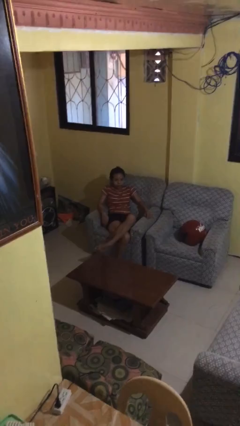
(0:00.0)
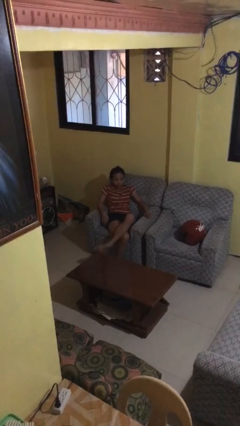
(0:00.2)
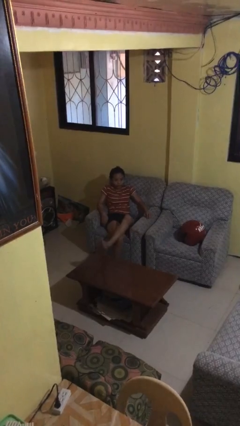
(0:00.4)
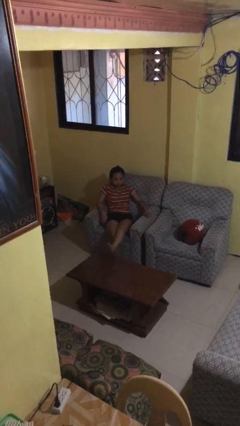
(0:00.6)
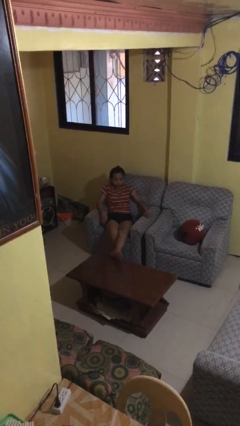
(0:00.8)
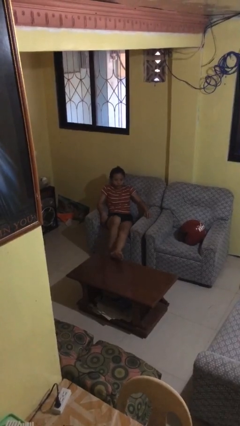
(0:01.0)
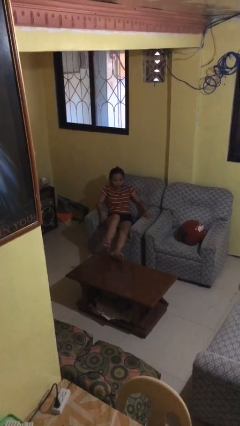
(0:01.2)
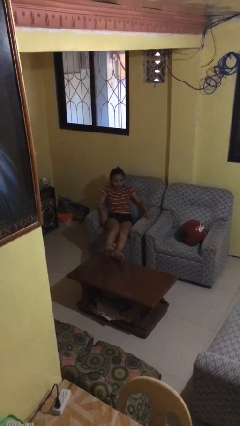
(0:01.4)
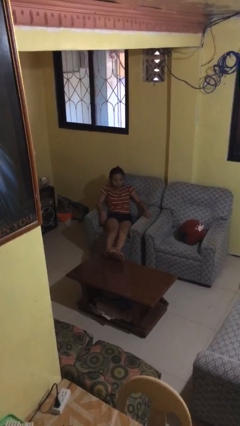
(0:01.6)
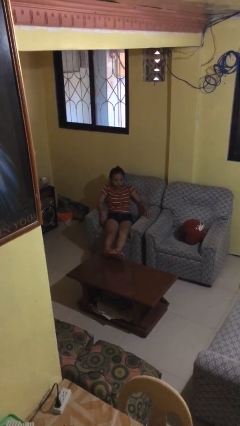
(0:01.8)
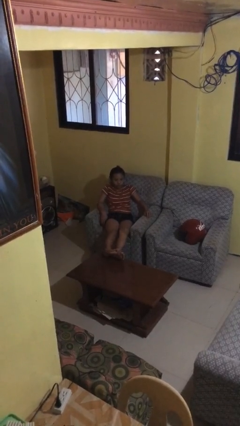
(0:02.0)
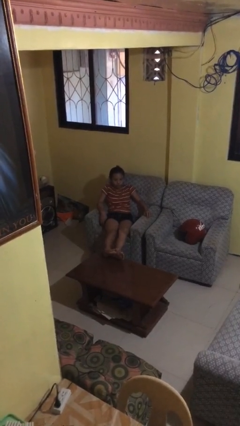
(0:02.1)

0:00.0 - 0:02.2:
person puts feet up

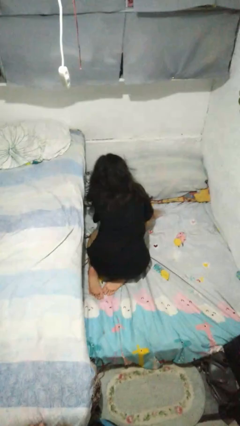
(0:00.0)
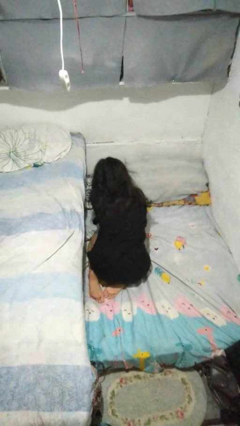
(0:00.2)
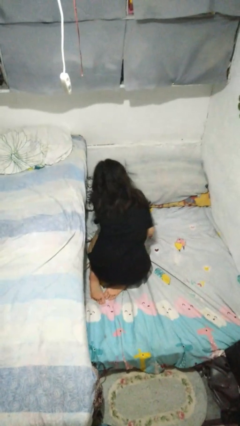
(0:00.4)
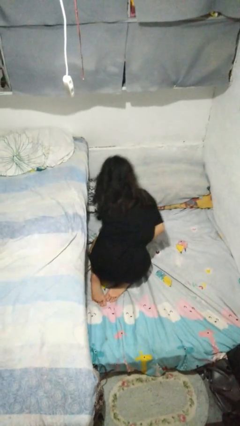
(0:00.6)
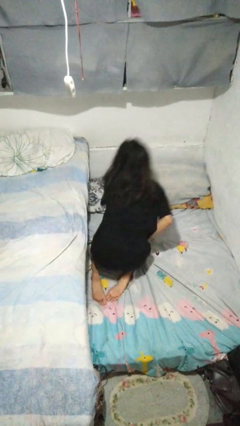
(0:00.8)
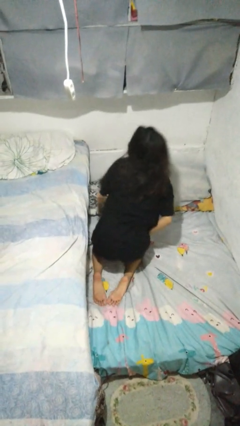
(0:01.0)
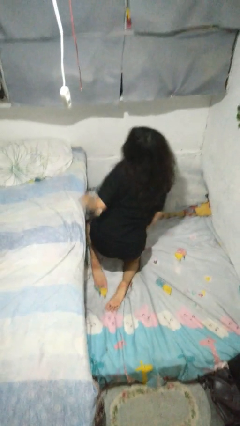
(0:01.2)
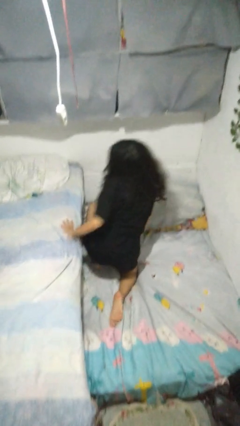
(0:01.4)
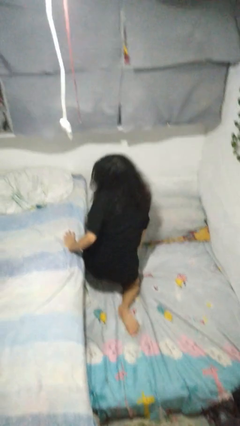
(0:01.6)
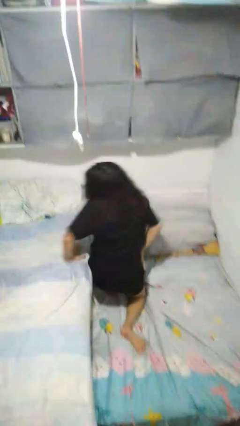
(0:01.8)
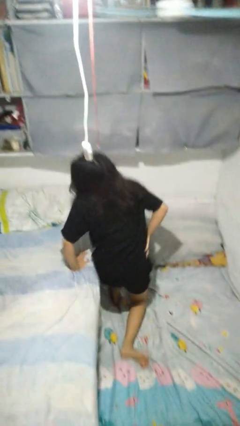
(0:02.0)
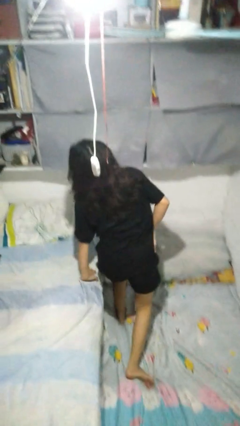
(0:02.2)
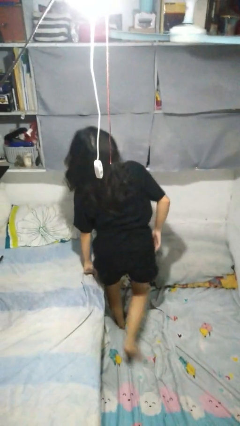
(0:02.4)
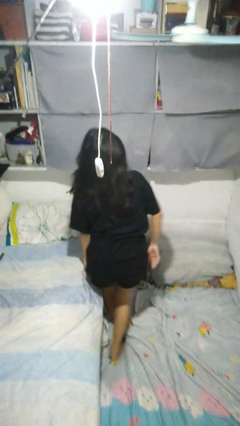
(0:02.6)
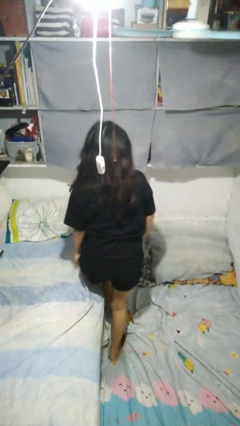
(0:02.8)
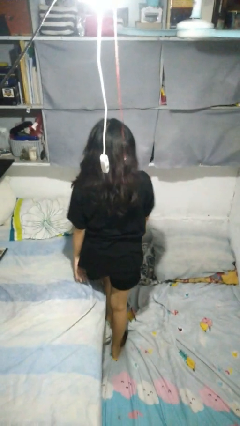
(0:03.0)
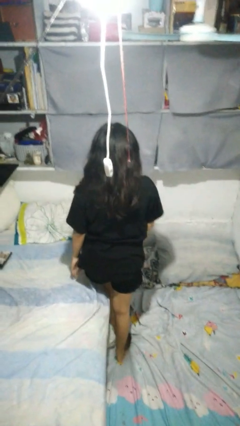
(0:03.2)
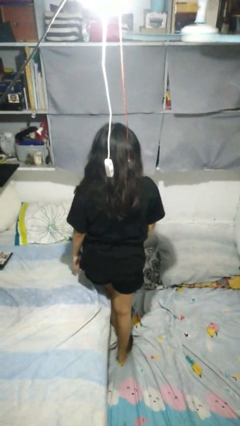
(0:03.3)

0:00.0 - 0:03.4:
person stands up from floor

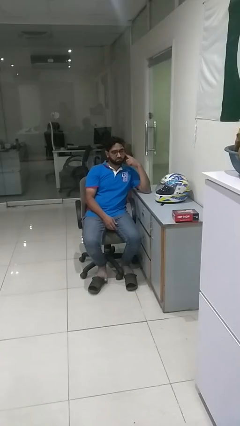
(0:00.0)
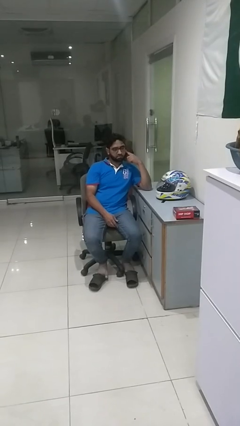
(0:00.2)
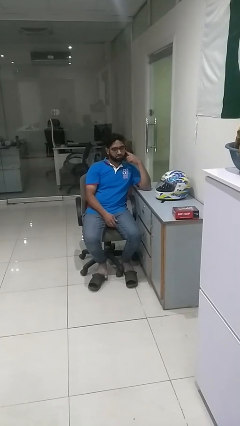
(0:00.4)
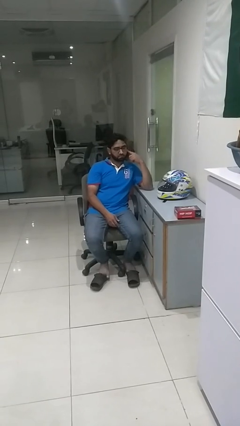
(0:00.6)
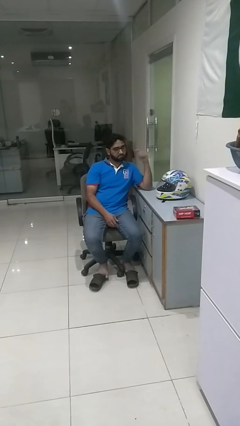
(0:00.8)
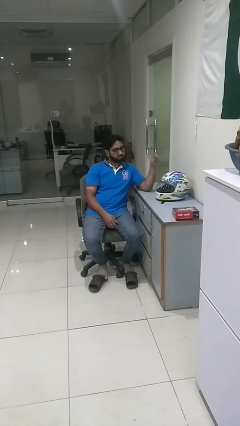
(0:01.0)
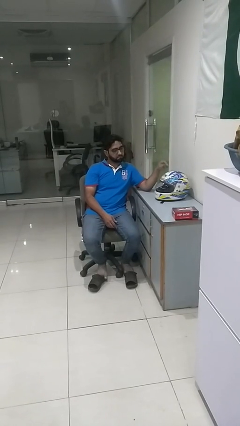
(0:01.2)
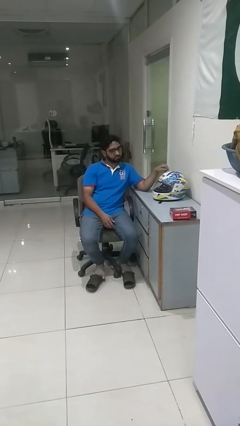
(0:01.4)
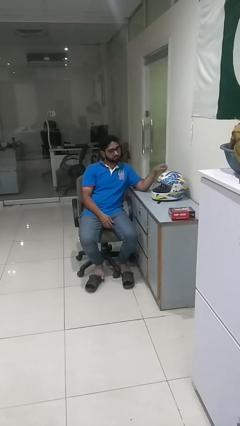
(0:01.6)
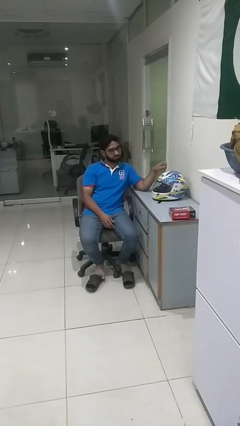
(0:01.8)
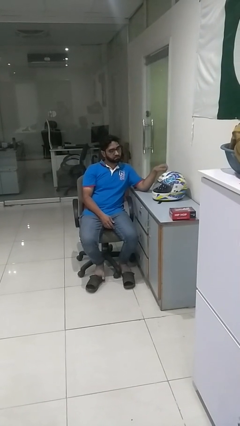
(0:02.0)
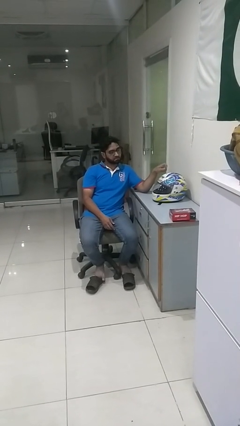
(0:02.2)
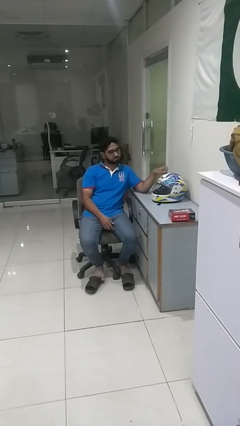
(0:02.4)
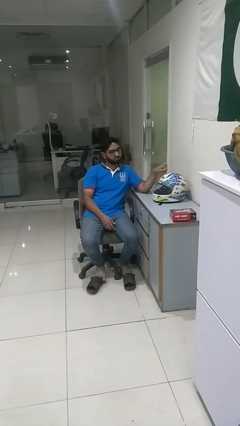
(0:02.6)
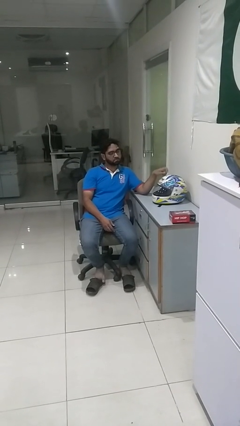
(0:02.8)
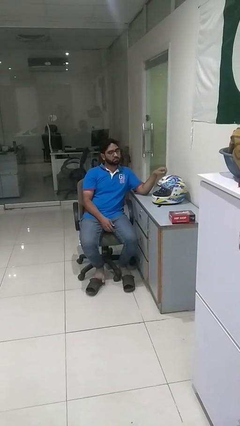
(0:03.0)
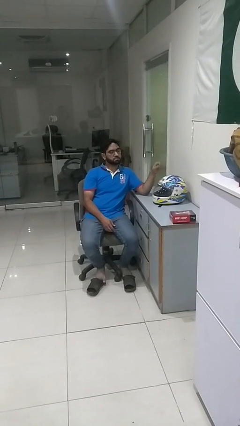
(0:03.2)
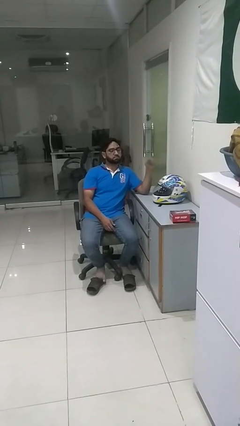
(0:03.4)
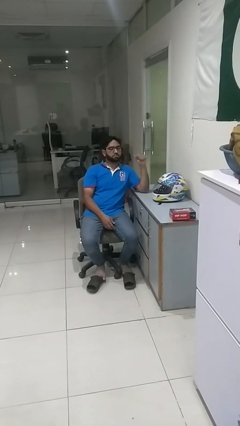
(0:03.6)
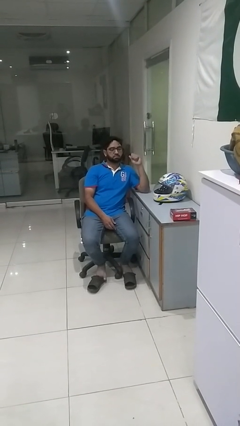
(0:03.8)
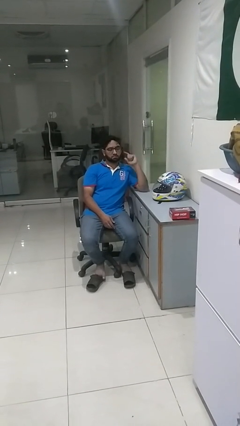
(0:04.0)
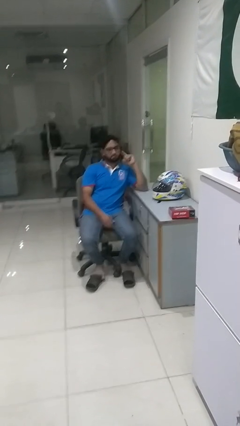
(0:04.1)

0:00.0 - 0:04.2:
person taps object with finger

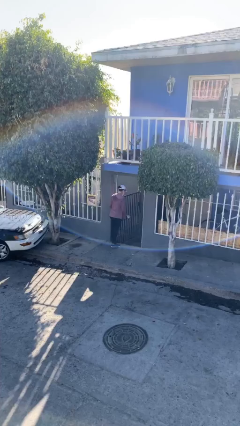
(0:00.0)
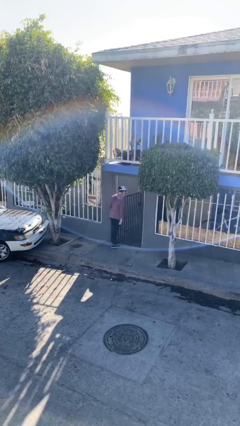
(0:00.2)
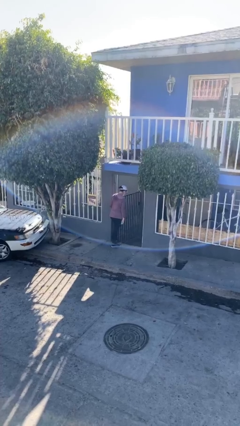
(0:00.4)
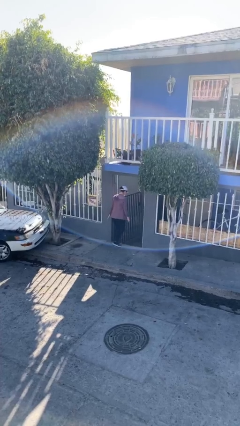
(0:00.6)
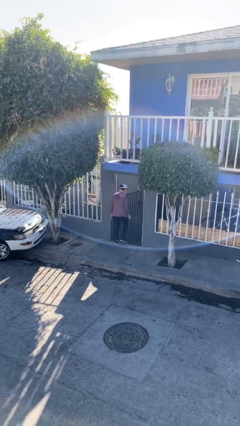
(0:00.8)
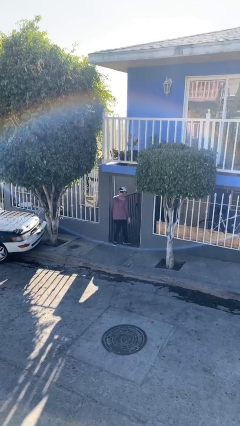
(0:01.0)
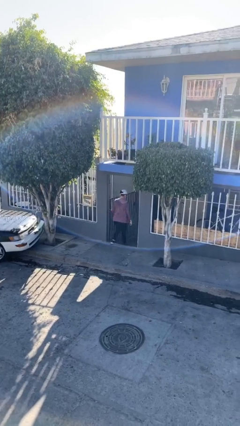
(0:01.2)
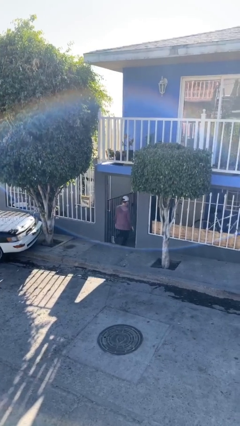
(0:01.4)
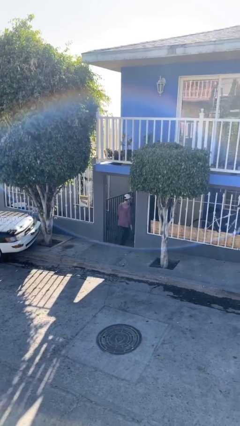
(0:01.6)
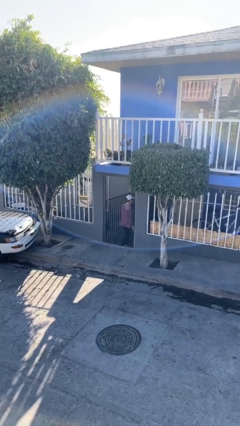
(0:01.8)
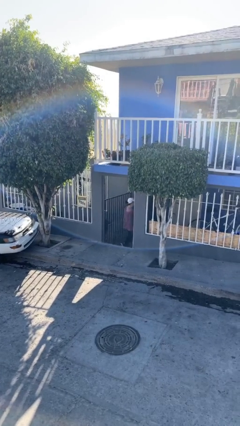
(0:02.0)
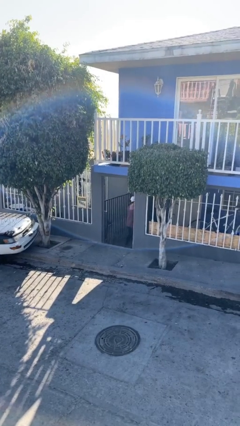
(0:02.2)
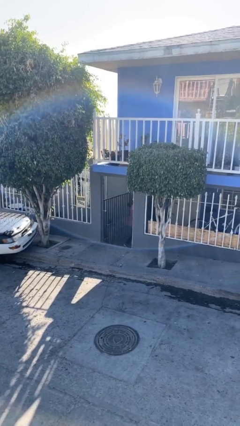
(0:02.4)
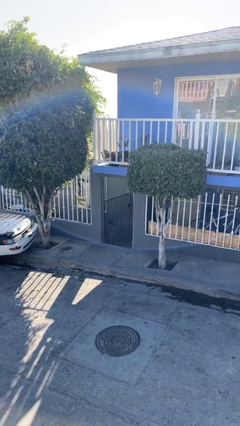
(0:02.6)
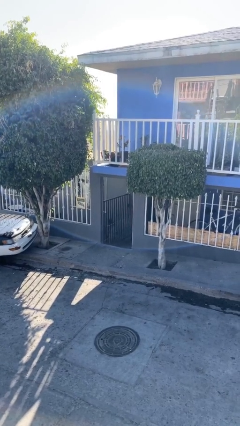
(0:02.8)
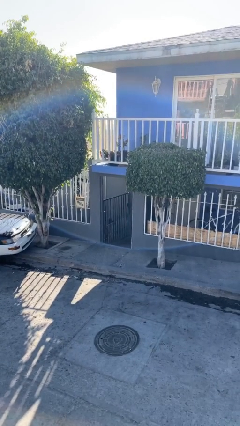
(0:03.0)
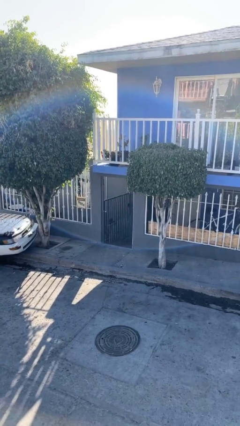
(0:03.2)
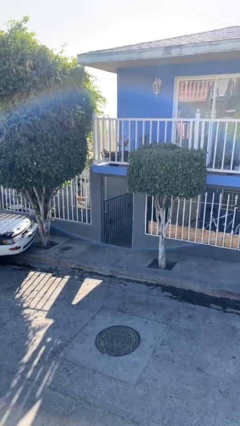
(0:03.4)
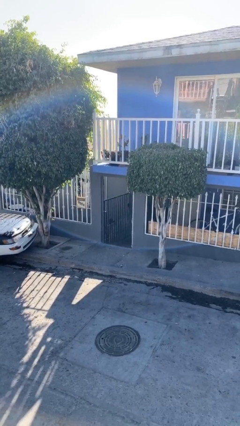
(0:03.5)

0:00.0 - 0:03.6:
person exits scene through structure

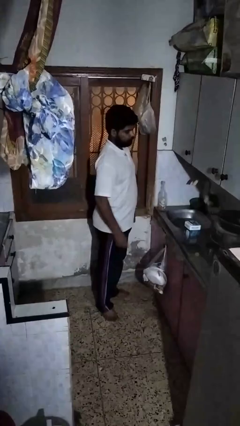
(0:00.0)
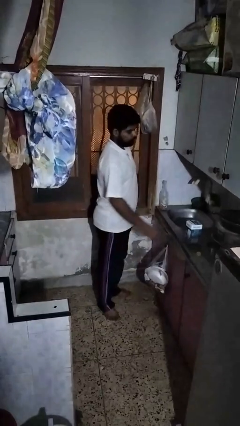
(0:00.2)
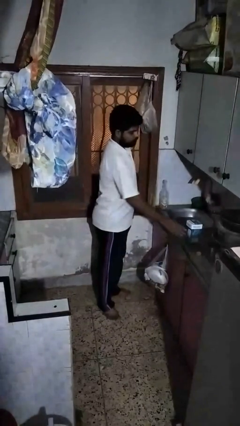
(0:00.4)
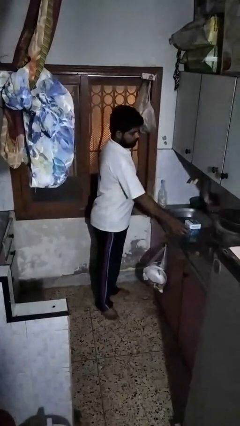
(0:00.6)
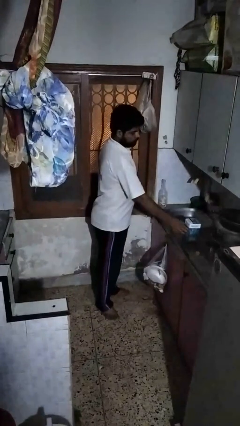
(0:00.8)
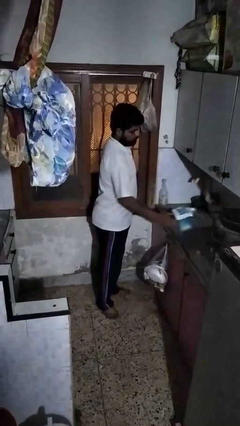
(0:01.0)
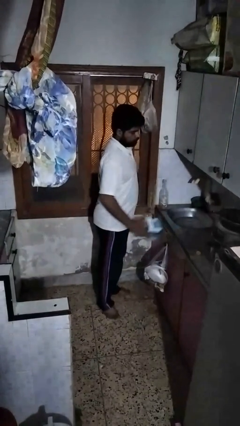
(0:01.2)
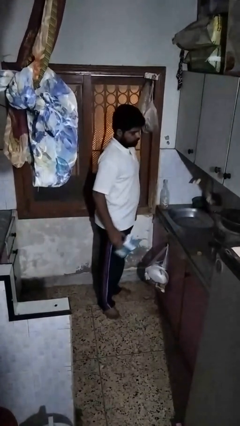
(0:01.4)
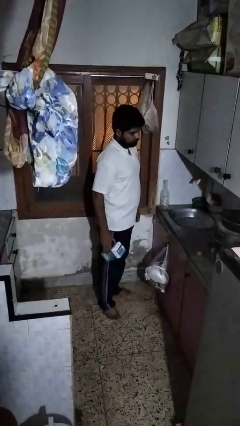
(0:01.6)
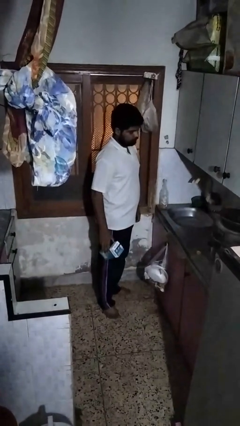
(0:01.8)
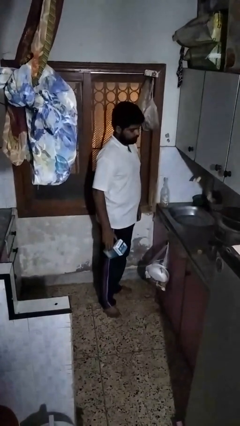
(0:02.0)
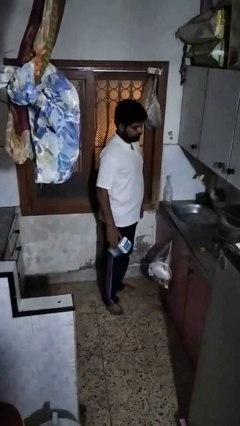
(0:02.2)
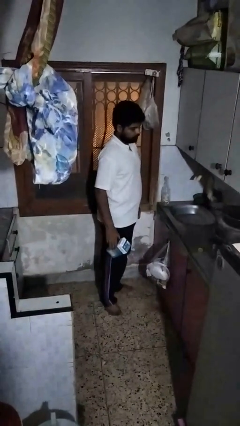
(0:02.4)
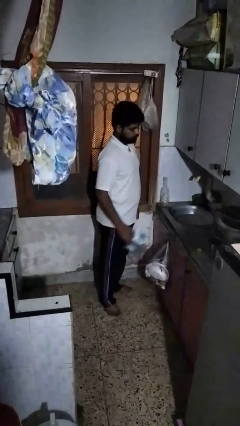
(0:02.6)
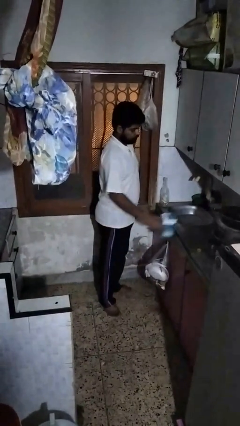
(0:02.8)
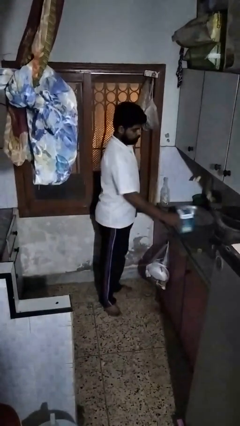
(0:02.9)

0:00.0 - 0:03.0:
person picks up object from countertop

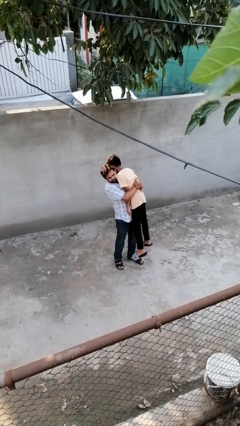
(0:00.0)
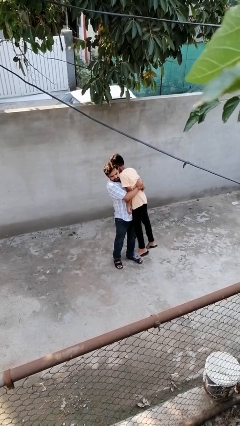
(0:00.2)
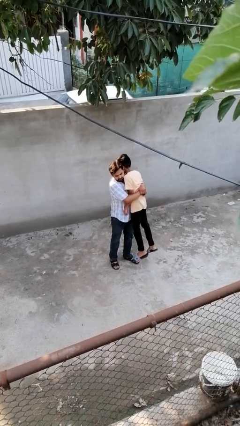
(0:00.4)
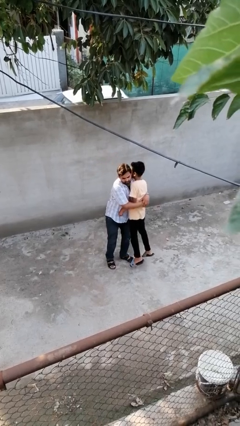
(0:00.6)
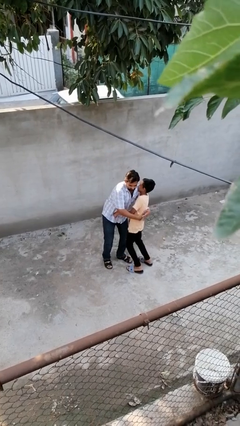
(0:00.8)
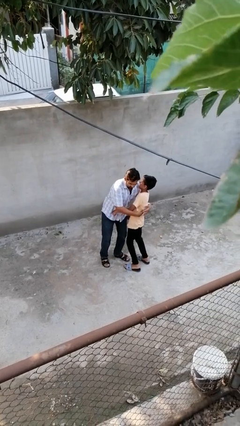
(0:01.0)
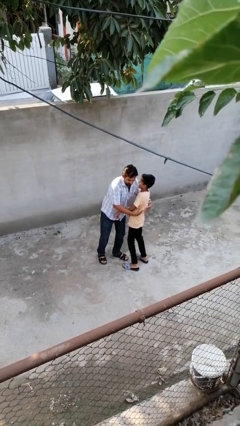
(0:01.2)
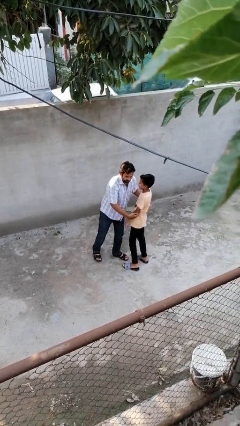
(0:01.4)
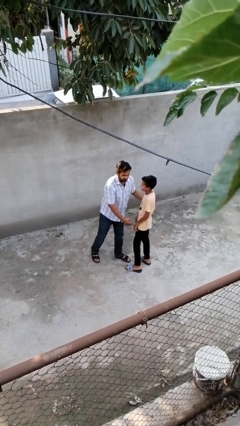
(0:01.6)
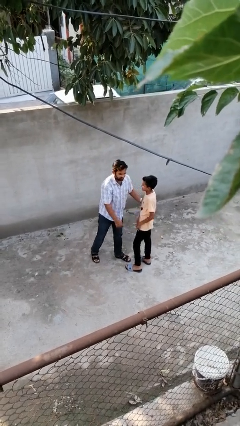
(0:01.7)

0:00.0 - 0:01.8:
person puts down person
